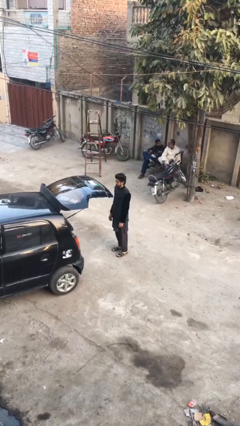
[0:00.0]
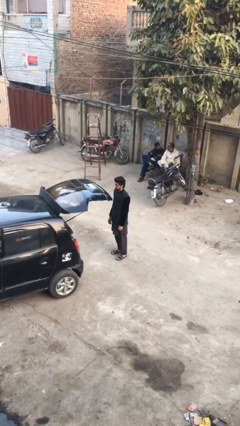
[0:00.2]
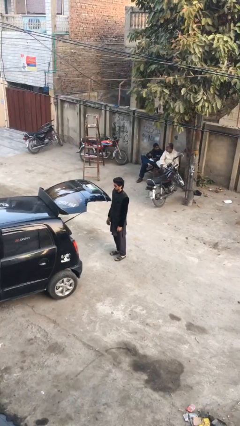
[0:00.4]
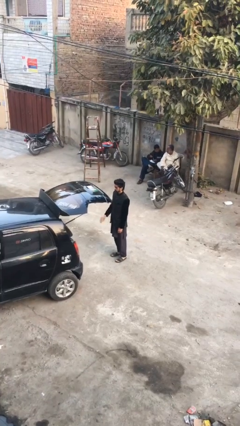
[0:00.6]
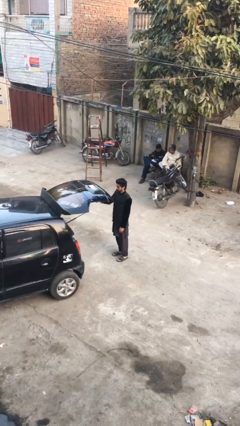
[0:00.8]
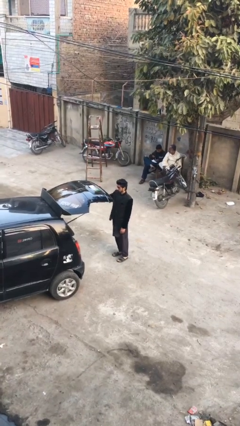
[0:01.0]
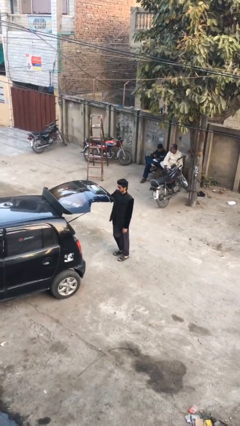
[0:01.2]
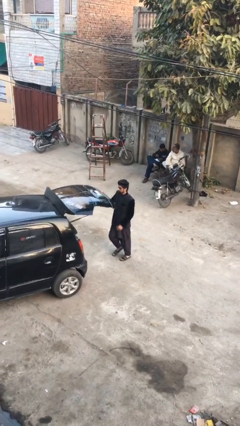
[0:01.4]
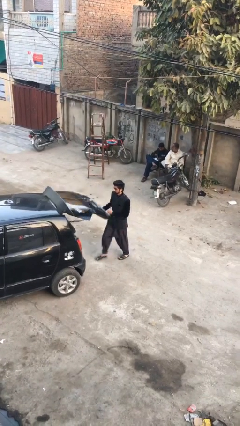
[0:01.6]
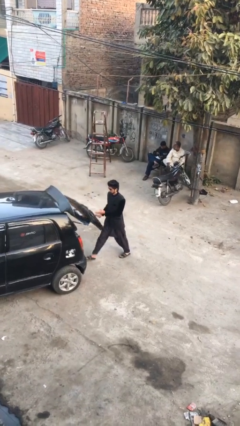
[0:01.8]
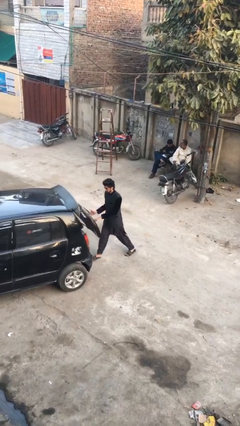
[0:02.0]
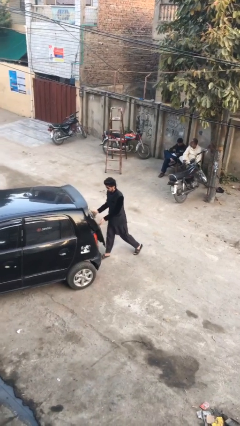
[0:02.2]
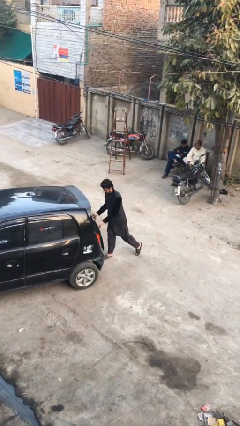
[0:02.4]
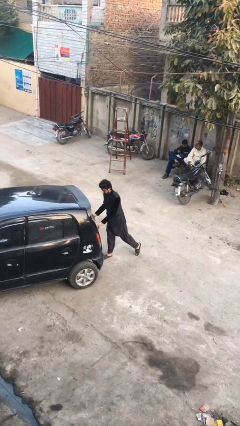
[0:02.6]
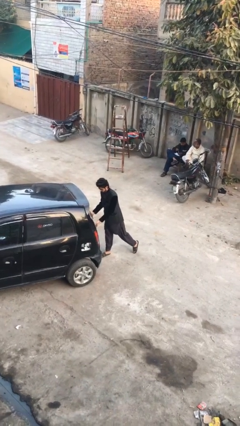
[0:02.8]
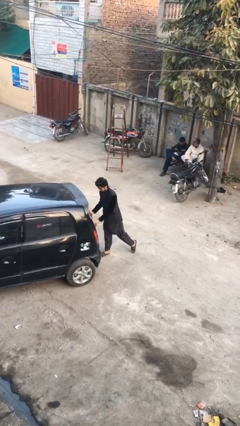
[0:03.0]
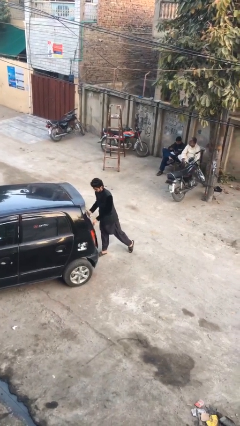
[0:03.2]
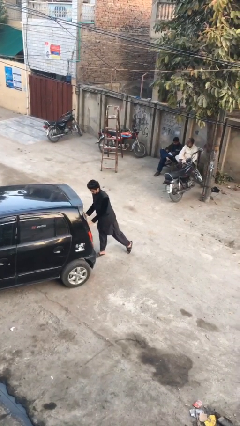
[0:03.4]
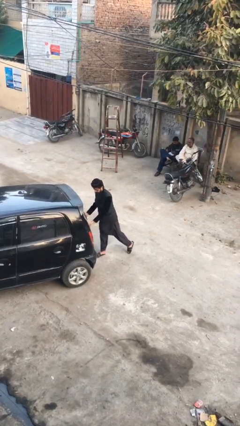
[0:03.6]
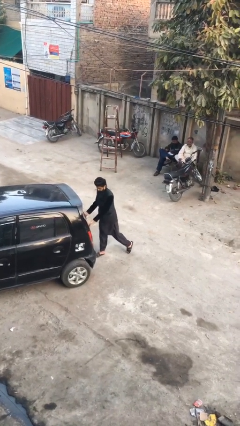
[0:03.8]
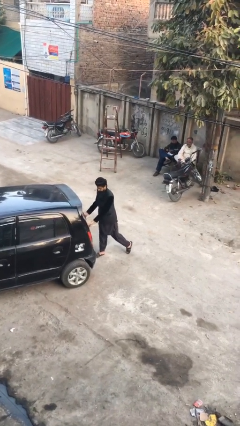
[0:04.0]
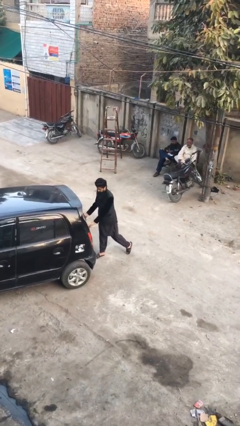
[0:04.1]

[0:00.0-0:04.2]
person closes car trunk

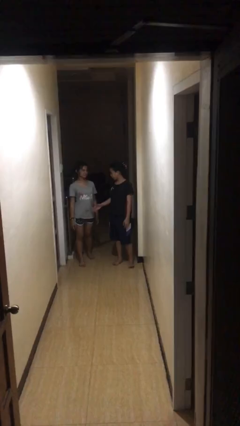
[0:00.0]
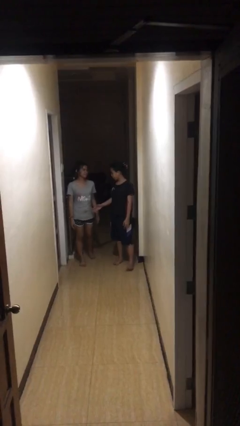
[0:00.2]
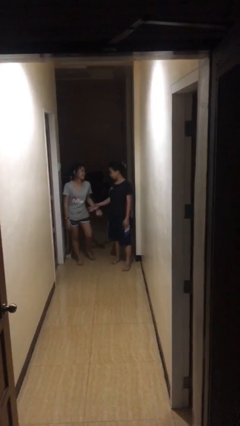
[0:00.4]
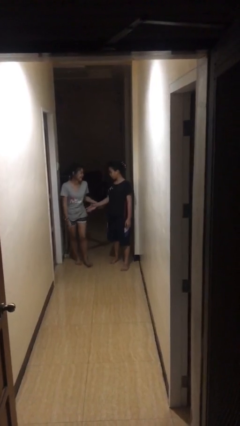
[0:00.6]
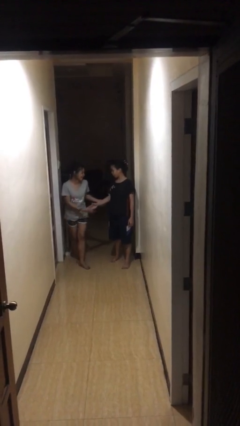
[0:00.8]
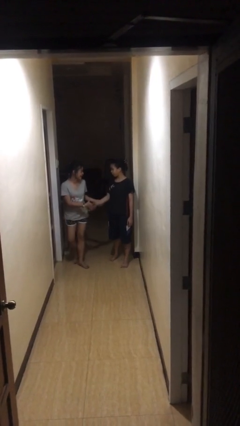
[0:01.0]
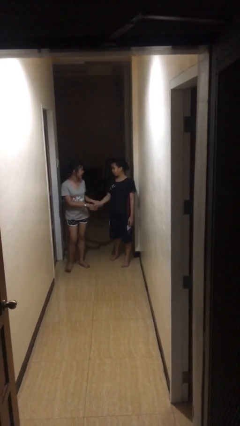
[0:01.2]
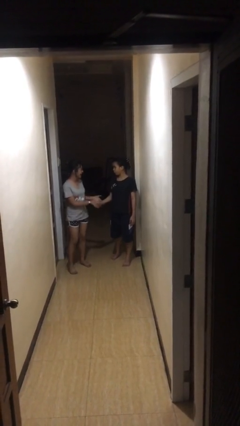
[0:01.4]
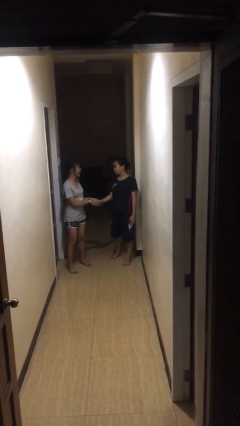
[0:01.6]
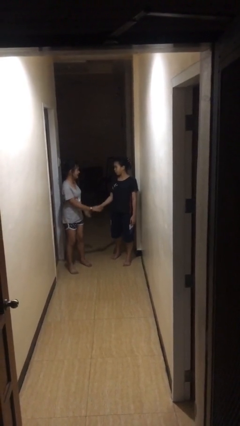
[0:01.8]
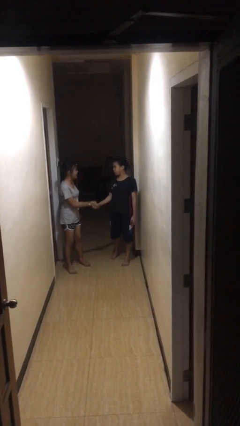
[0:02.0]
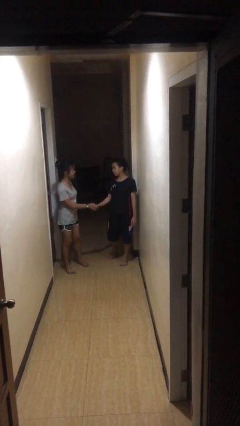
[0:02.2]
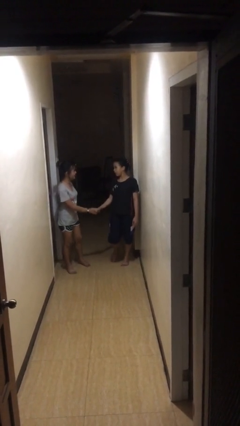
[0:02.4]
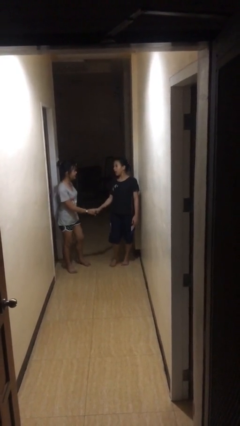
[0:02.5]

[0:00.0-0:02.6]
person shakes hand

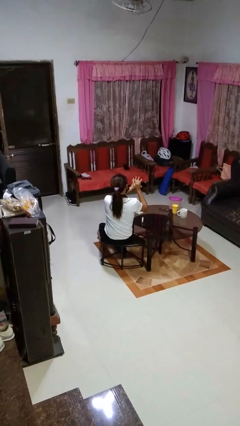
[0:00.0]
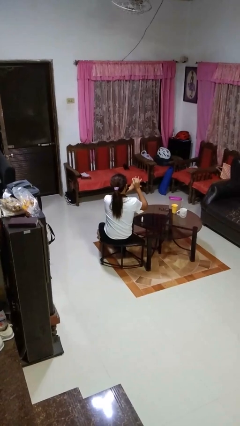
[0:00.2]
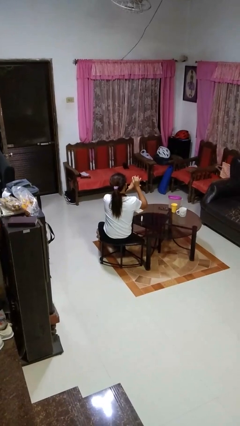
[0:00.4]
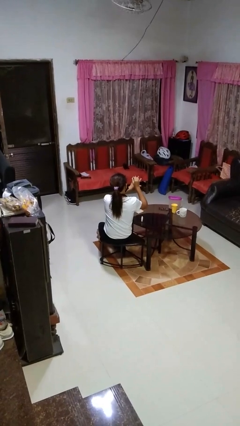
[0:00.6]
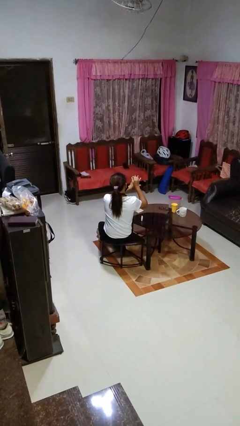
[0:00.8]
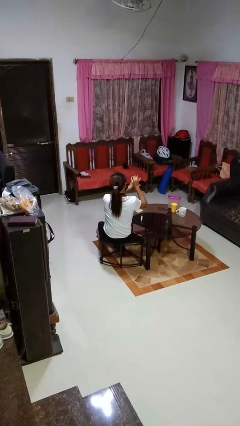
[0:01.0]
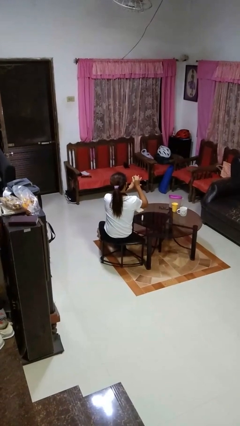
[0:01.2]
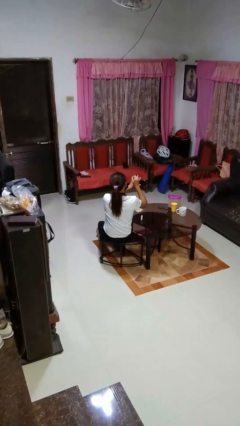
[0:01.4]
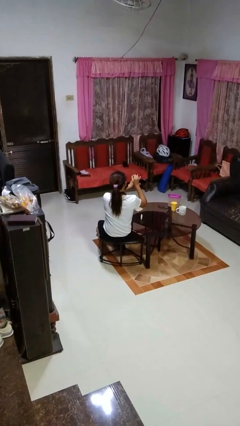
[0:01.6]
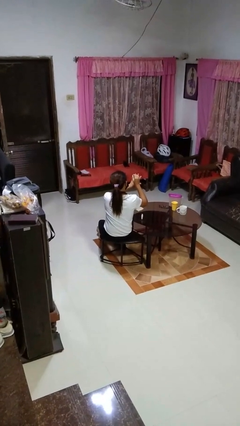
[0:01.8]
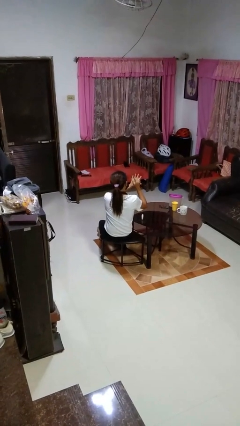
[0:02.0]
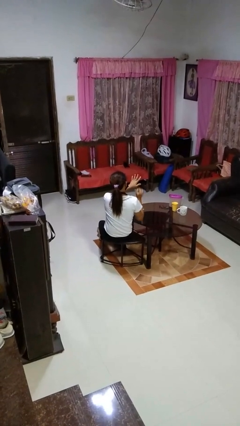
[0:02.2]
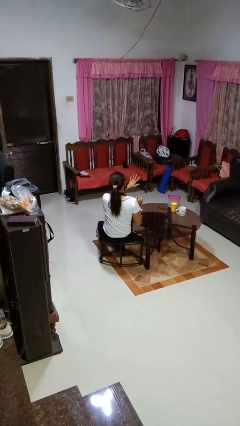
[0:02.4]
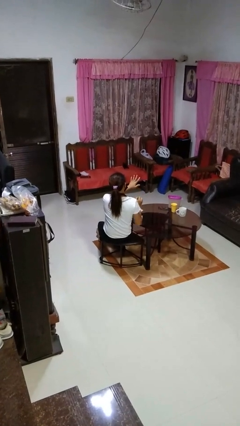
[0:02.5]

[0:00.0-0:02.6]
person paints fingernails

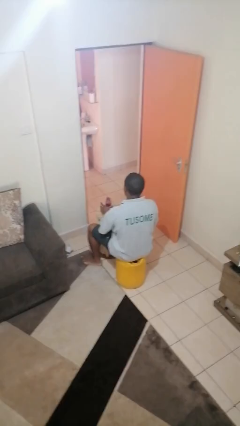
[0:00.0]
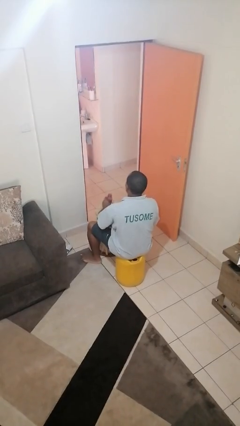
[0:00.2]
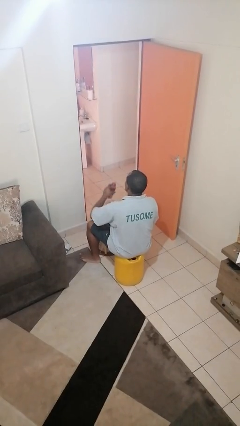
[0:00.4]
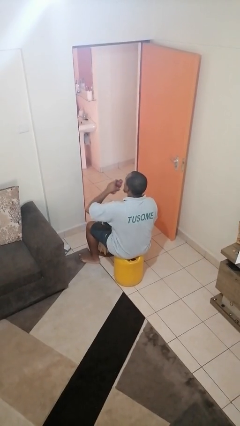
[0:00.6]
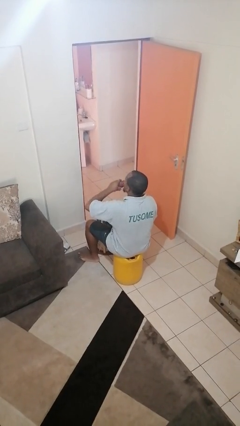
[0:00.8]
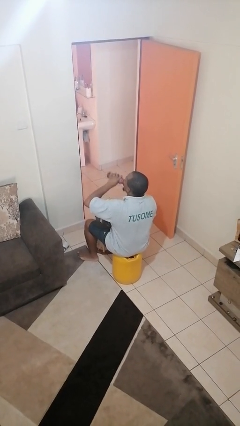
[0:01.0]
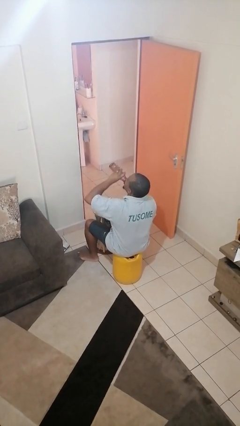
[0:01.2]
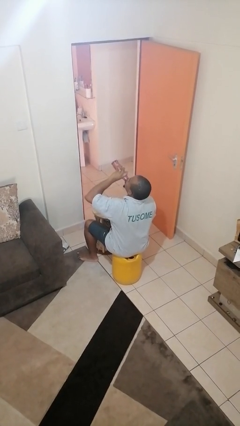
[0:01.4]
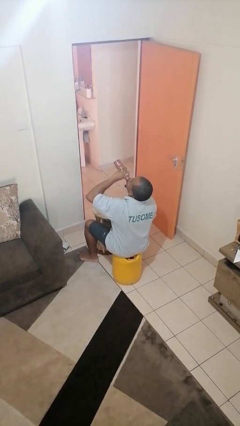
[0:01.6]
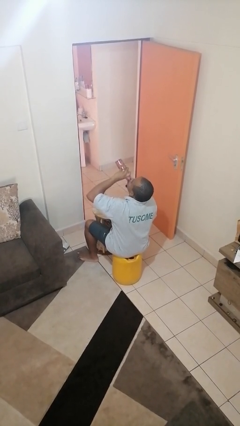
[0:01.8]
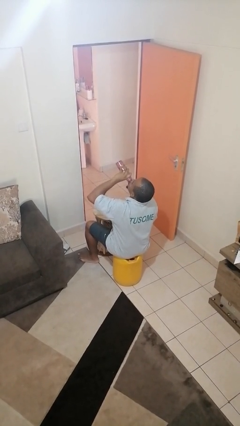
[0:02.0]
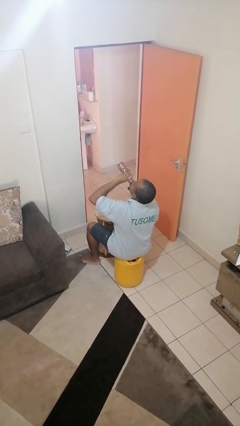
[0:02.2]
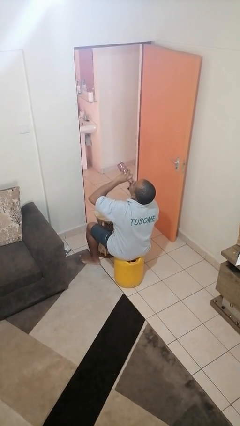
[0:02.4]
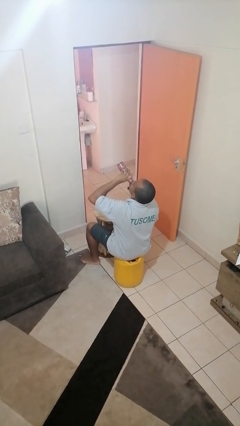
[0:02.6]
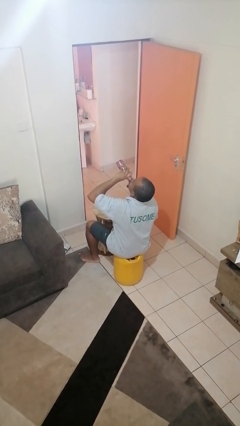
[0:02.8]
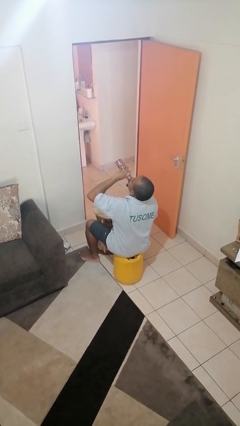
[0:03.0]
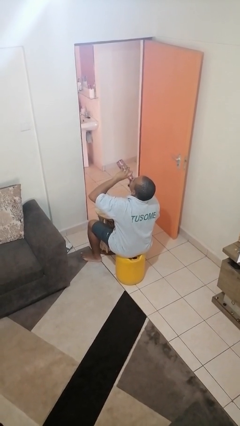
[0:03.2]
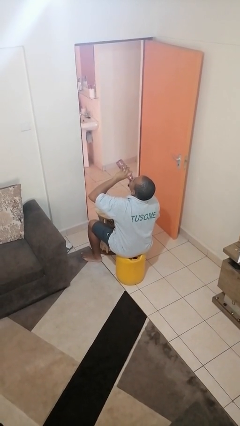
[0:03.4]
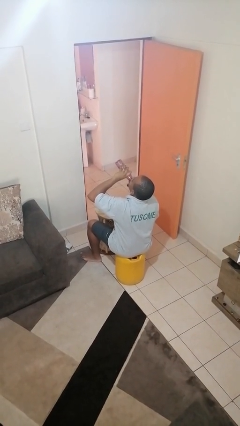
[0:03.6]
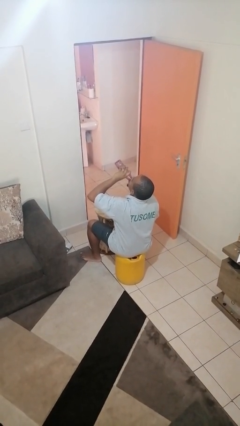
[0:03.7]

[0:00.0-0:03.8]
person drinks from bottle

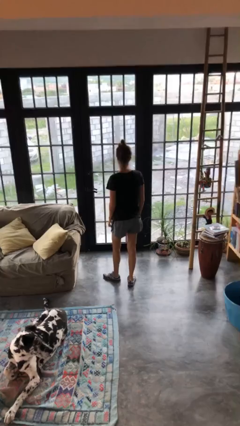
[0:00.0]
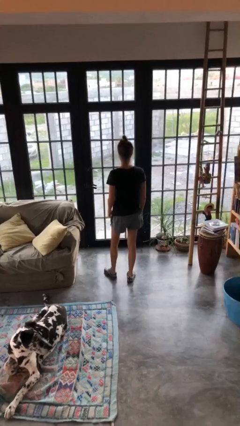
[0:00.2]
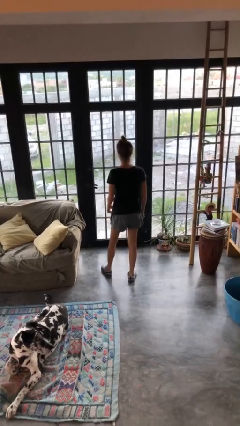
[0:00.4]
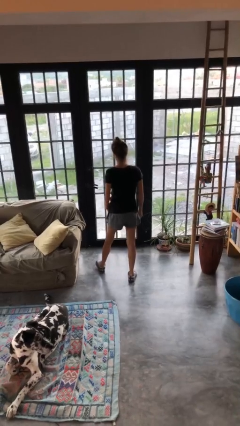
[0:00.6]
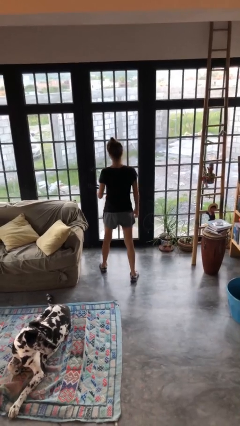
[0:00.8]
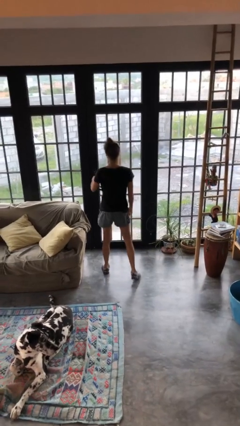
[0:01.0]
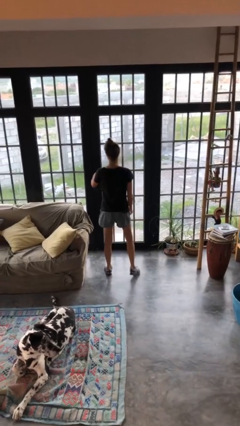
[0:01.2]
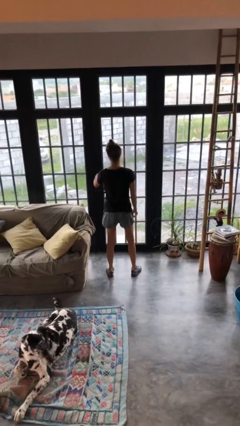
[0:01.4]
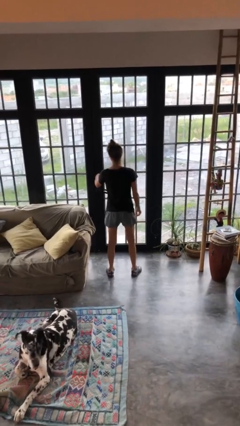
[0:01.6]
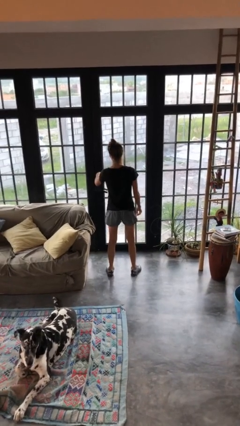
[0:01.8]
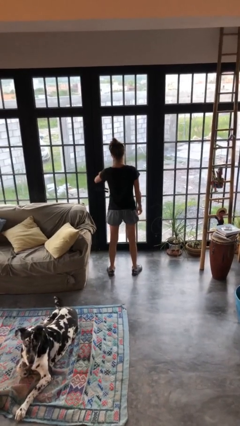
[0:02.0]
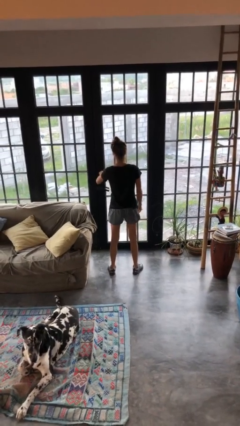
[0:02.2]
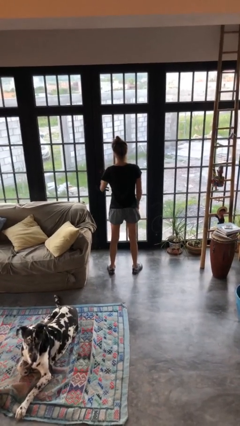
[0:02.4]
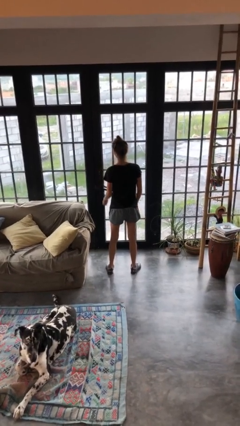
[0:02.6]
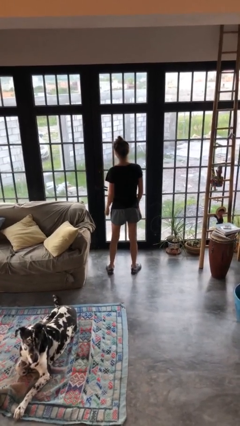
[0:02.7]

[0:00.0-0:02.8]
person unlocks door with keys

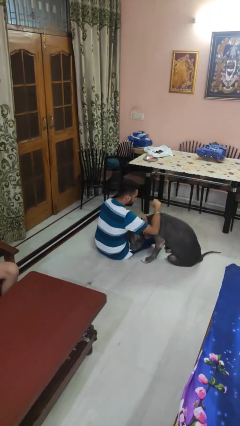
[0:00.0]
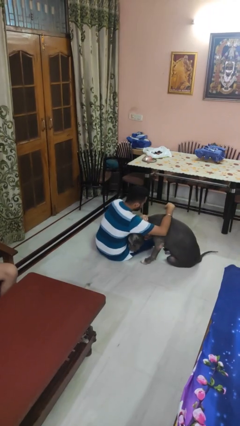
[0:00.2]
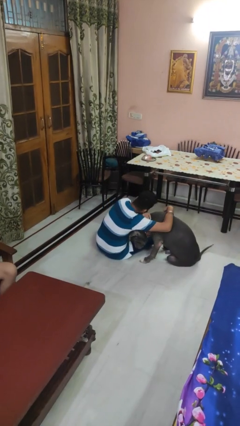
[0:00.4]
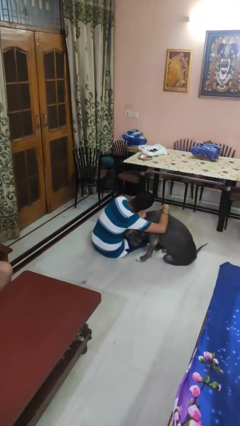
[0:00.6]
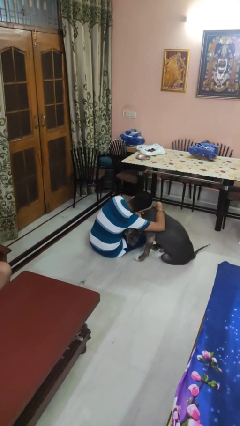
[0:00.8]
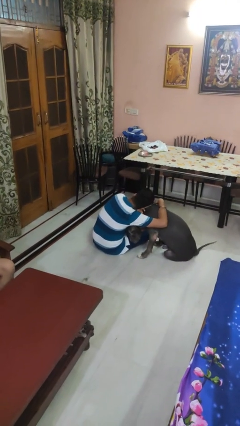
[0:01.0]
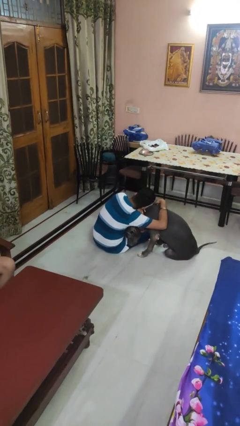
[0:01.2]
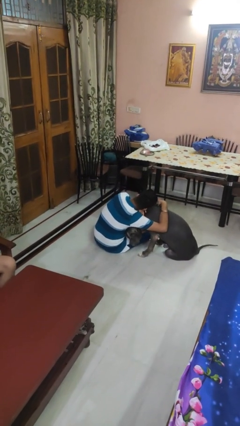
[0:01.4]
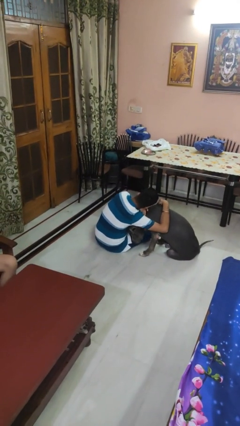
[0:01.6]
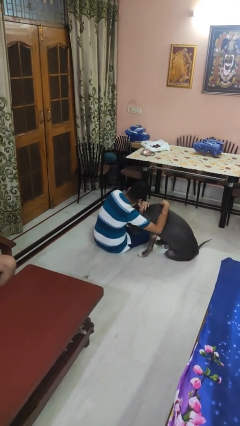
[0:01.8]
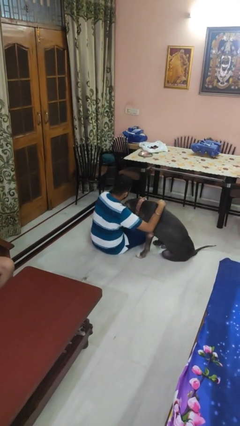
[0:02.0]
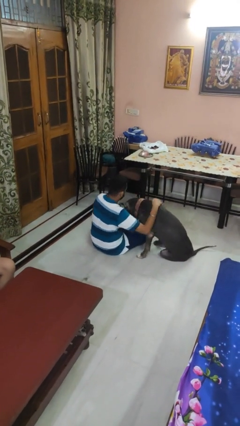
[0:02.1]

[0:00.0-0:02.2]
person hugs dog
